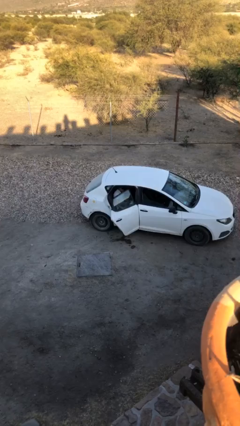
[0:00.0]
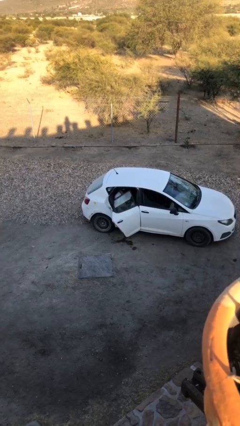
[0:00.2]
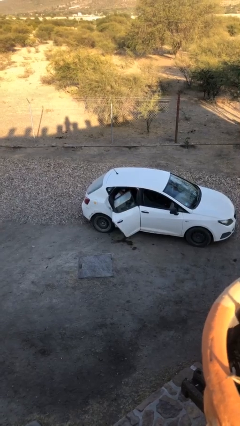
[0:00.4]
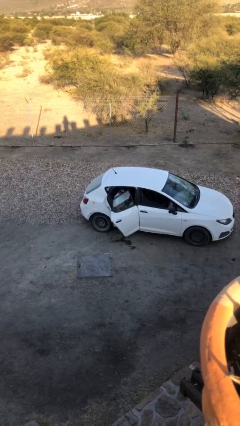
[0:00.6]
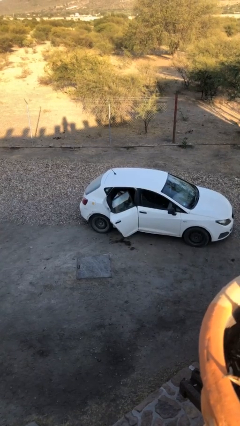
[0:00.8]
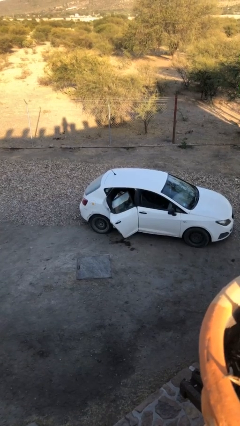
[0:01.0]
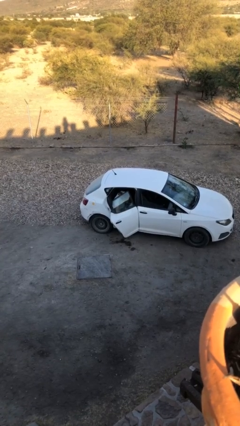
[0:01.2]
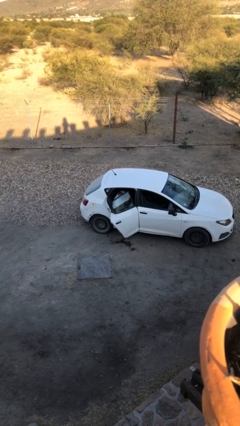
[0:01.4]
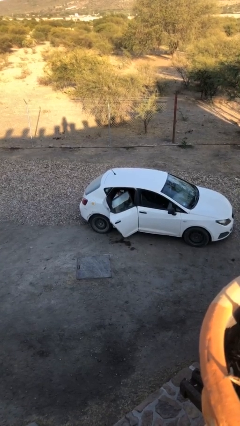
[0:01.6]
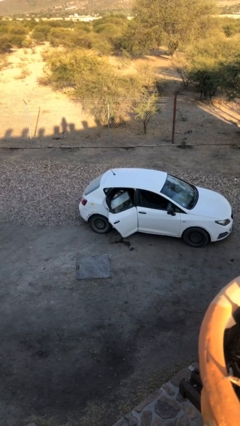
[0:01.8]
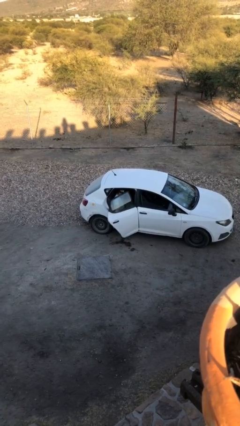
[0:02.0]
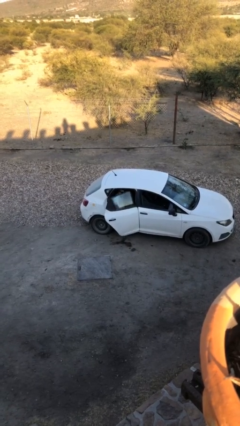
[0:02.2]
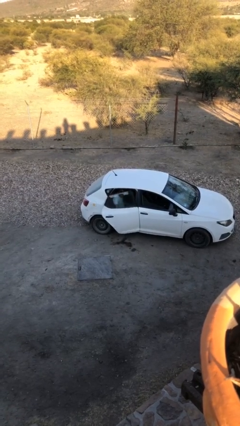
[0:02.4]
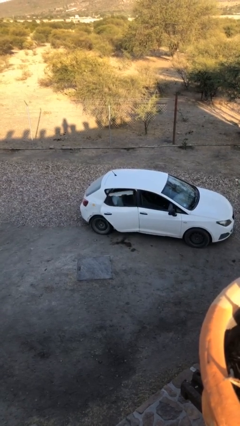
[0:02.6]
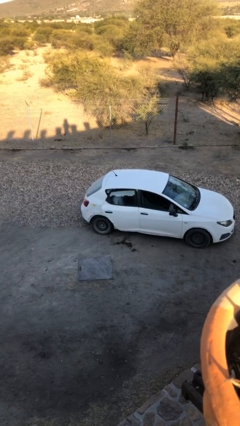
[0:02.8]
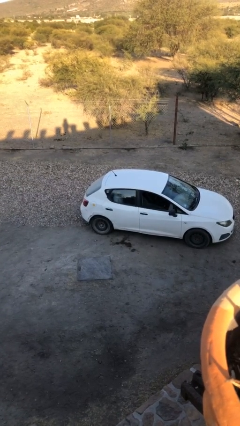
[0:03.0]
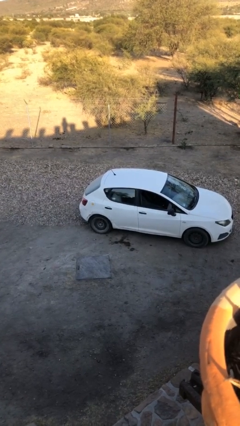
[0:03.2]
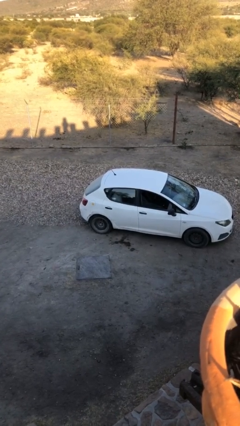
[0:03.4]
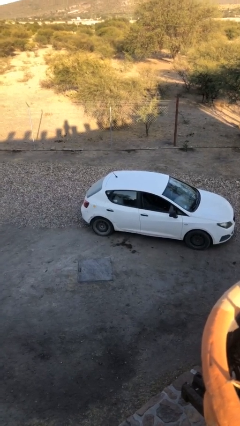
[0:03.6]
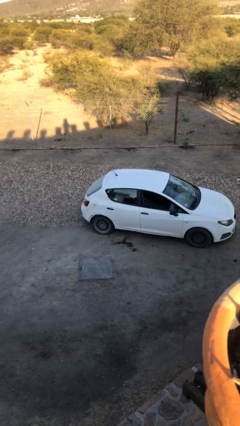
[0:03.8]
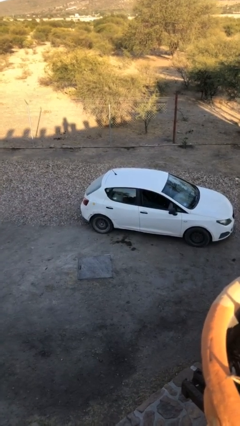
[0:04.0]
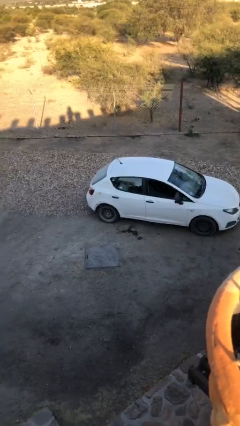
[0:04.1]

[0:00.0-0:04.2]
person closes car door

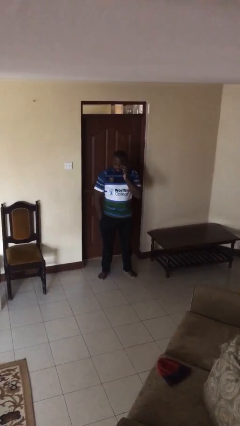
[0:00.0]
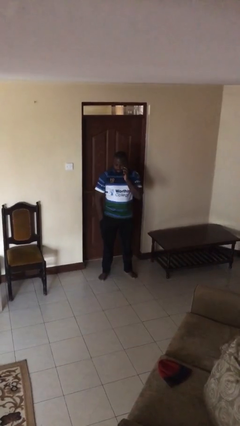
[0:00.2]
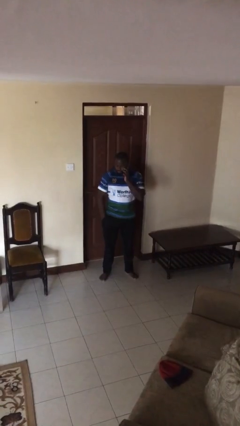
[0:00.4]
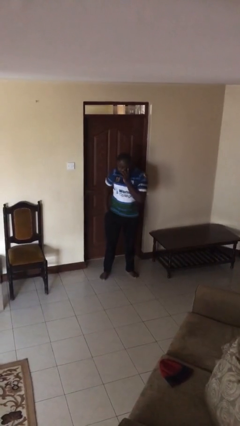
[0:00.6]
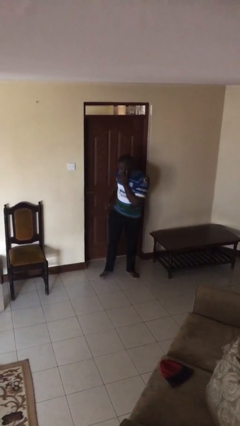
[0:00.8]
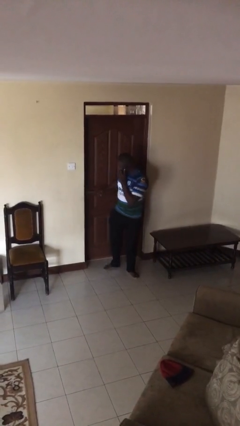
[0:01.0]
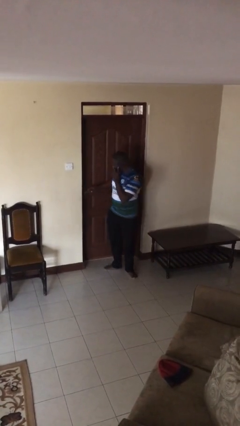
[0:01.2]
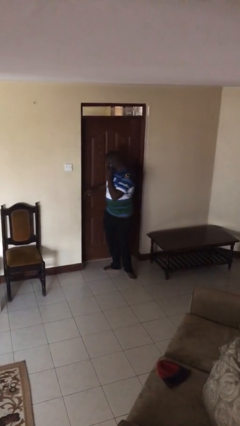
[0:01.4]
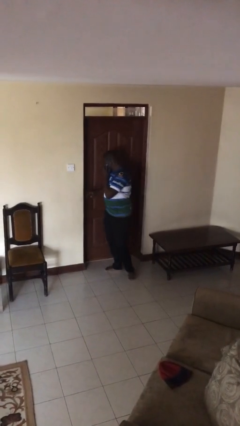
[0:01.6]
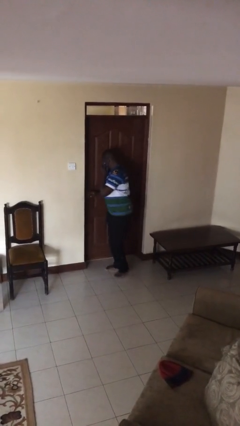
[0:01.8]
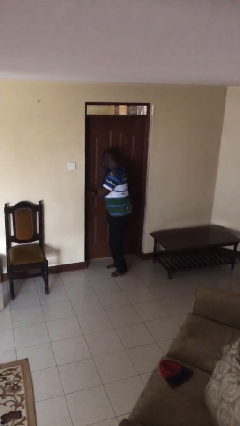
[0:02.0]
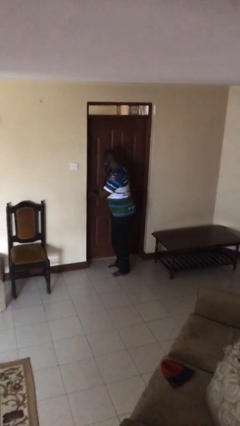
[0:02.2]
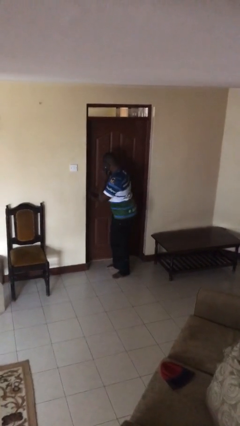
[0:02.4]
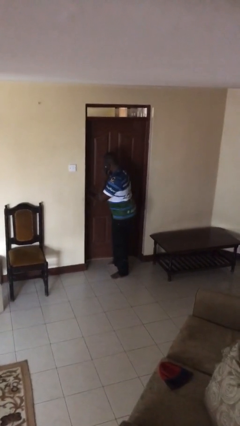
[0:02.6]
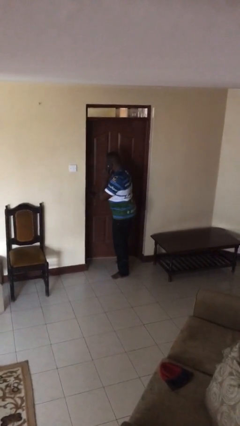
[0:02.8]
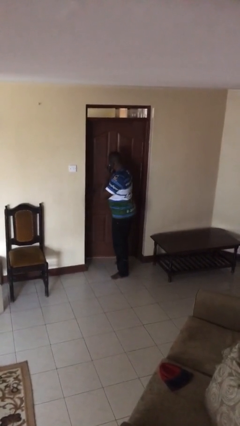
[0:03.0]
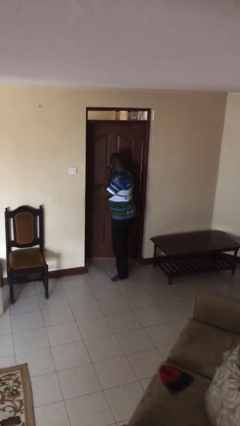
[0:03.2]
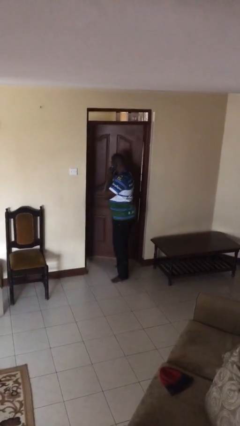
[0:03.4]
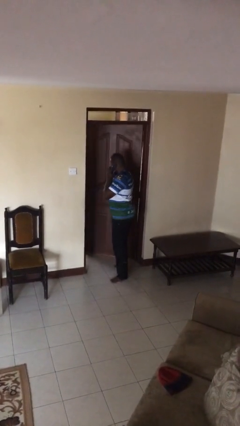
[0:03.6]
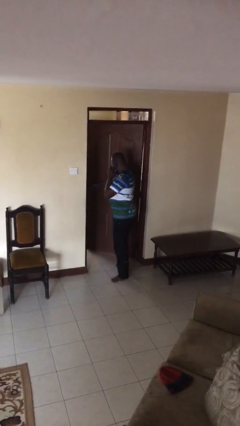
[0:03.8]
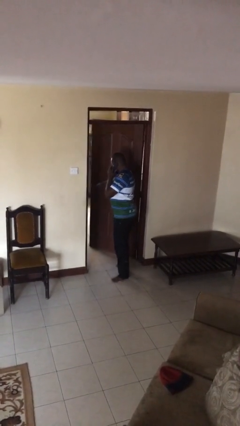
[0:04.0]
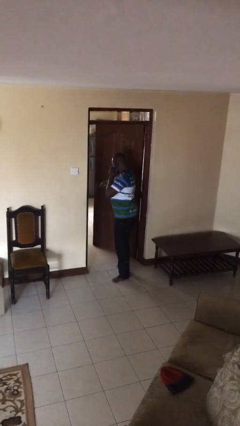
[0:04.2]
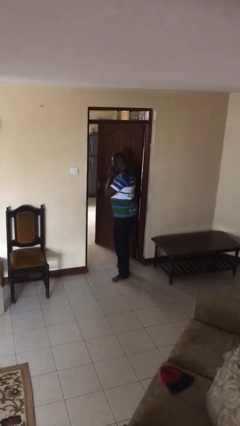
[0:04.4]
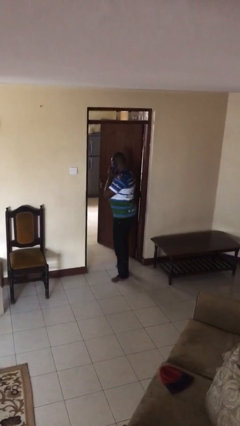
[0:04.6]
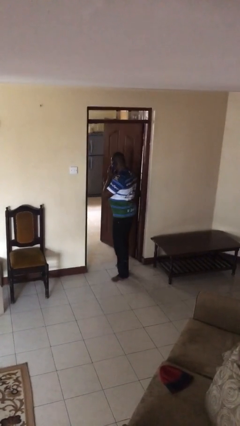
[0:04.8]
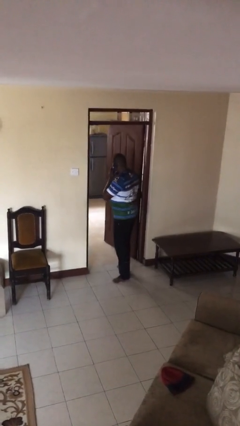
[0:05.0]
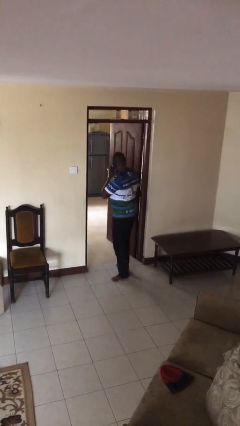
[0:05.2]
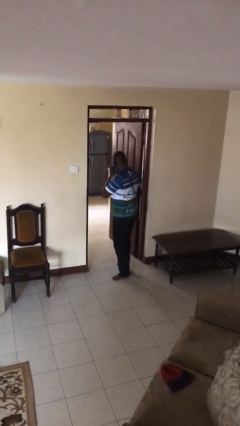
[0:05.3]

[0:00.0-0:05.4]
person opens facility door

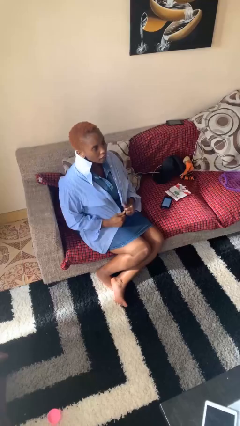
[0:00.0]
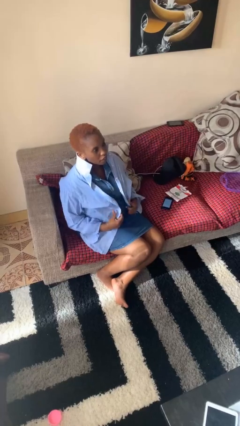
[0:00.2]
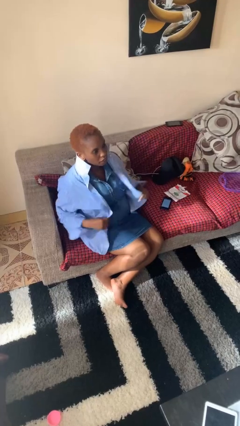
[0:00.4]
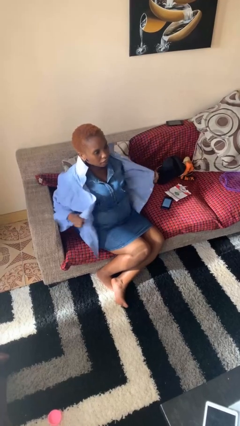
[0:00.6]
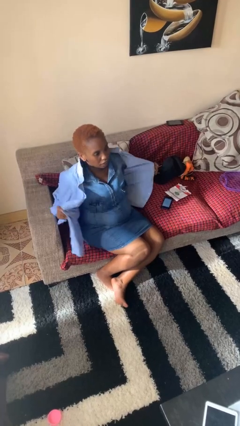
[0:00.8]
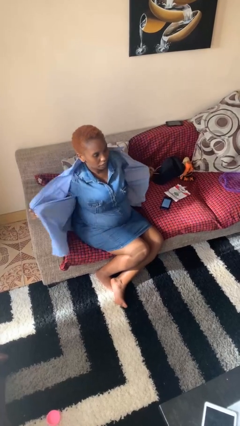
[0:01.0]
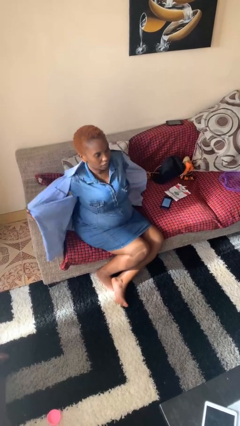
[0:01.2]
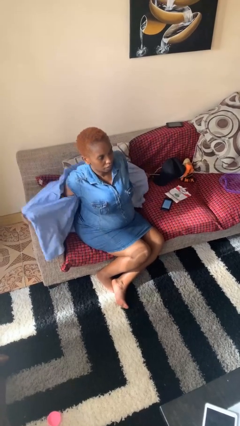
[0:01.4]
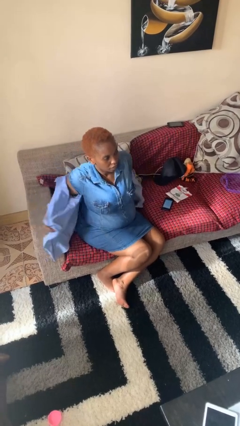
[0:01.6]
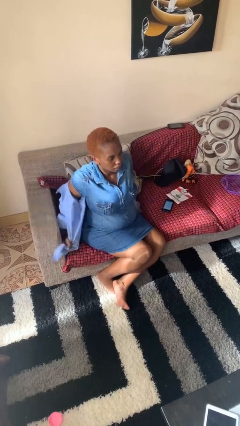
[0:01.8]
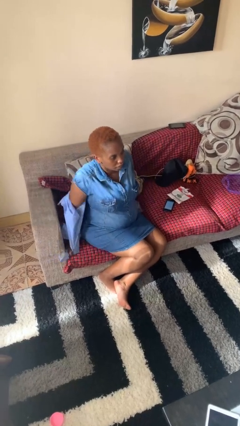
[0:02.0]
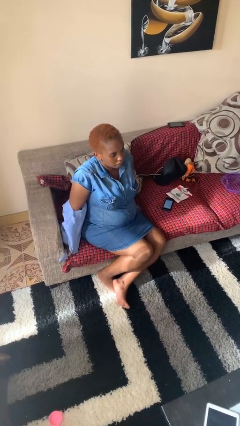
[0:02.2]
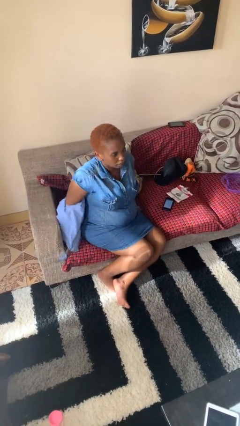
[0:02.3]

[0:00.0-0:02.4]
person takes off shirt

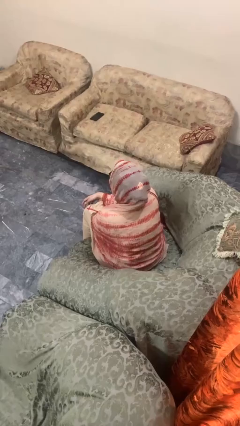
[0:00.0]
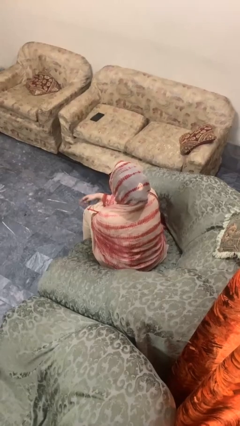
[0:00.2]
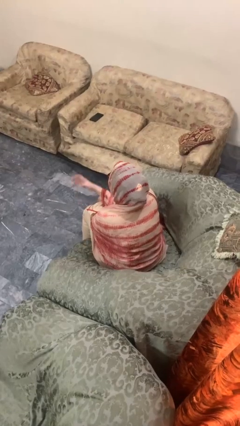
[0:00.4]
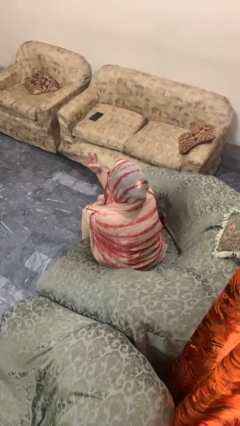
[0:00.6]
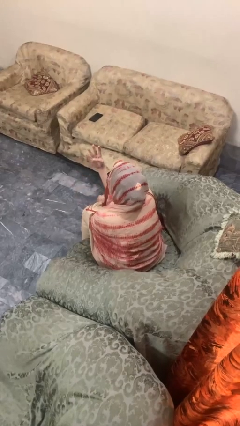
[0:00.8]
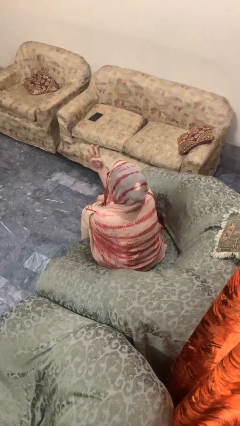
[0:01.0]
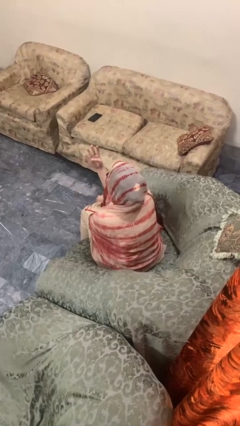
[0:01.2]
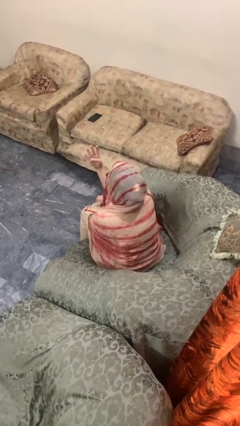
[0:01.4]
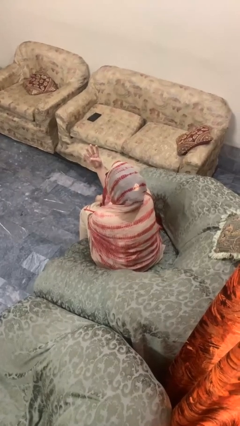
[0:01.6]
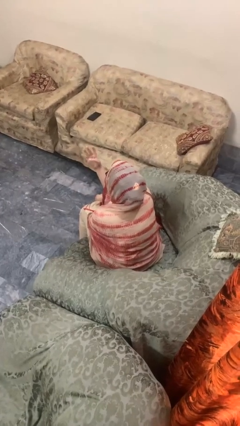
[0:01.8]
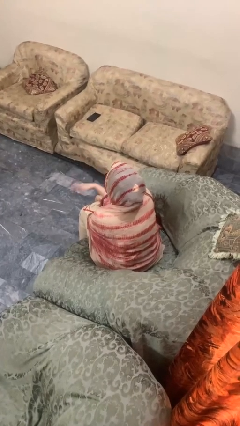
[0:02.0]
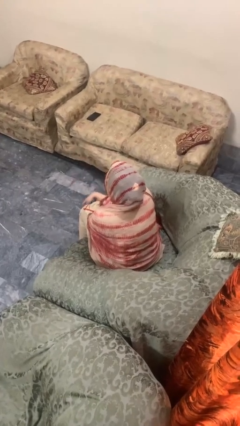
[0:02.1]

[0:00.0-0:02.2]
person gestures number four

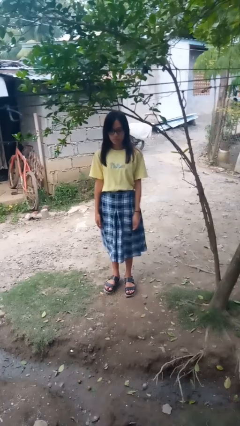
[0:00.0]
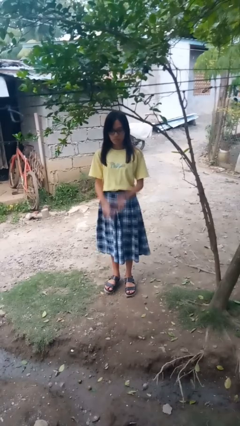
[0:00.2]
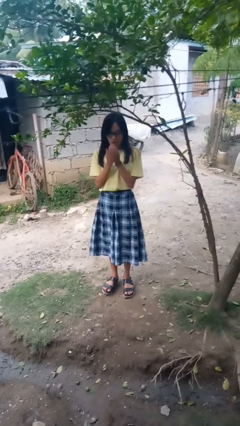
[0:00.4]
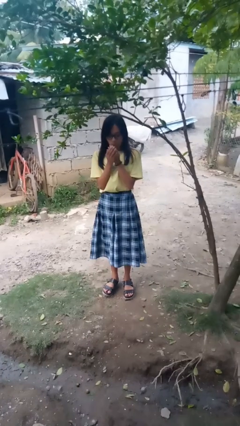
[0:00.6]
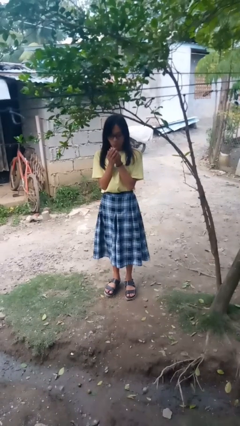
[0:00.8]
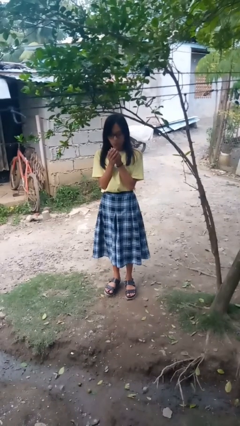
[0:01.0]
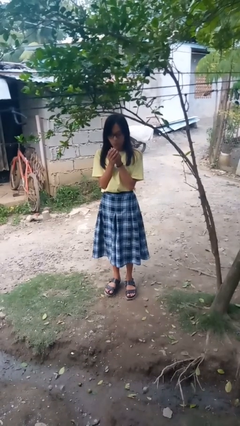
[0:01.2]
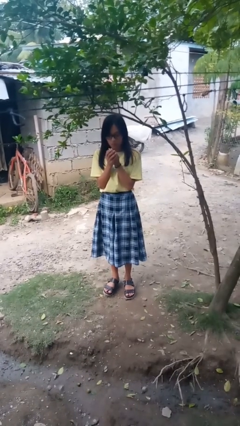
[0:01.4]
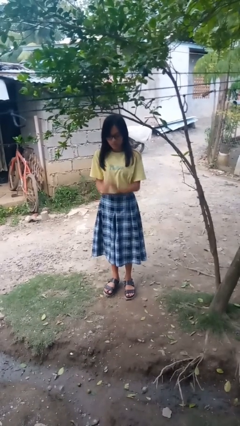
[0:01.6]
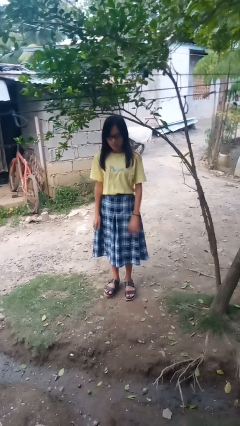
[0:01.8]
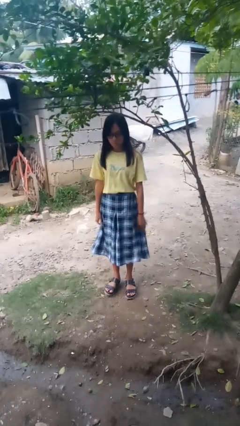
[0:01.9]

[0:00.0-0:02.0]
person blows into hands

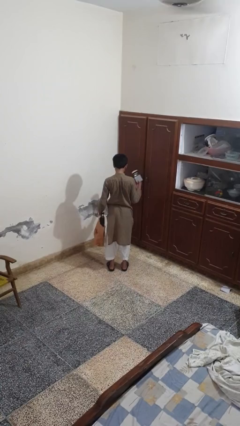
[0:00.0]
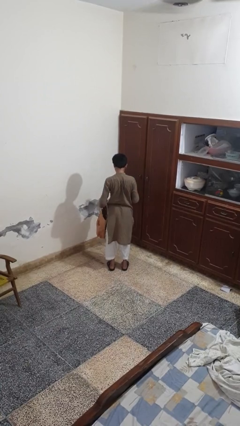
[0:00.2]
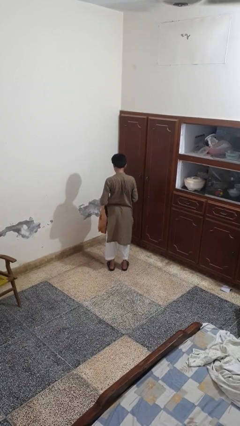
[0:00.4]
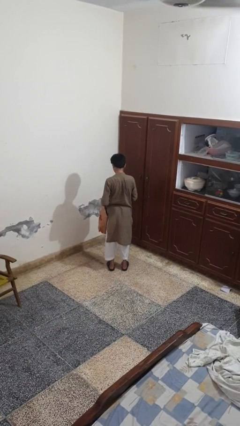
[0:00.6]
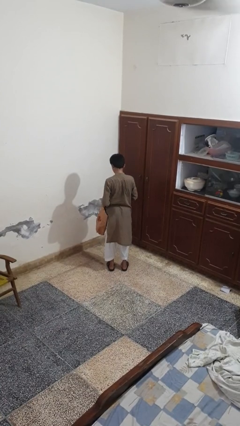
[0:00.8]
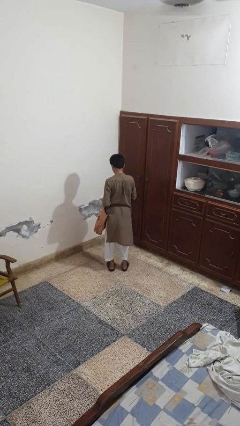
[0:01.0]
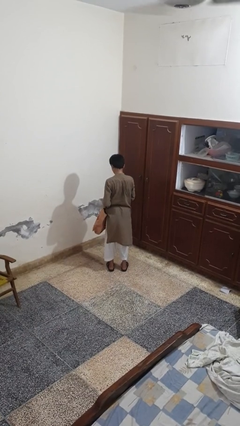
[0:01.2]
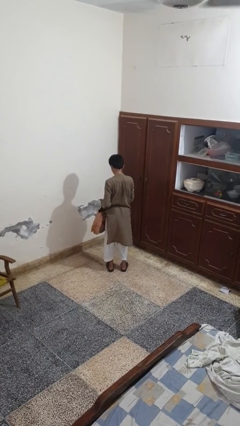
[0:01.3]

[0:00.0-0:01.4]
person puts object into bag
